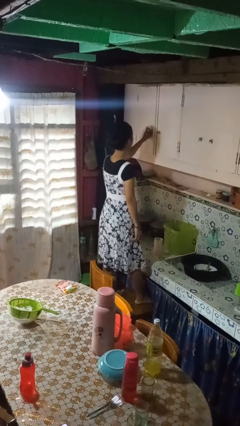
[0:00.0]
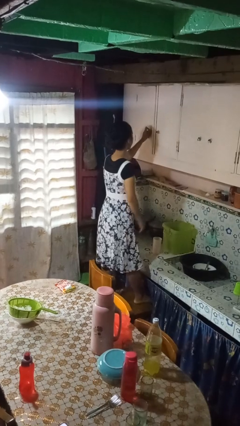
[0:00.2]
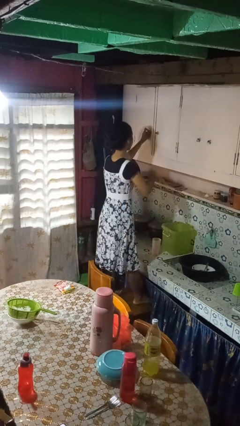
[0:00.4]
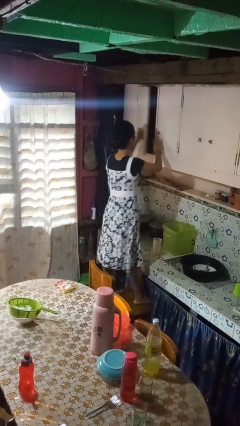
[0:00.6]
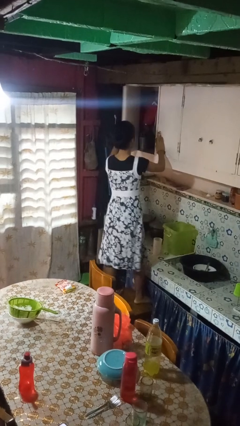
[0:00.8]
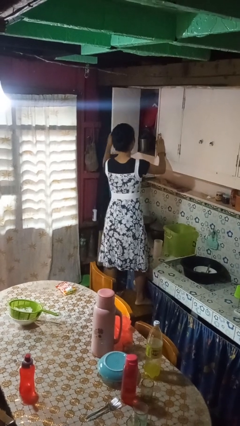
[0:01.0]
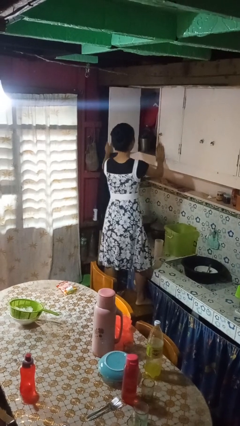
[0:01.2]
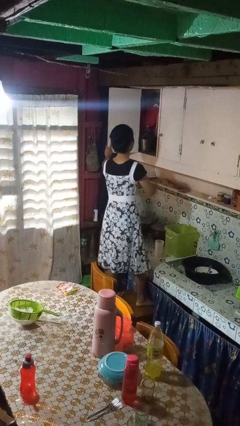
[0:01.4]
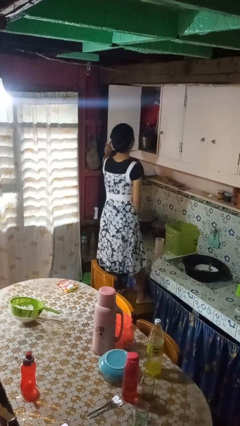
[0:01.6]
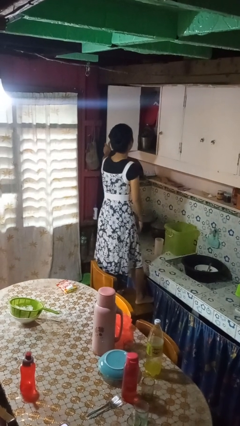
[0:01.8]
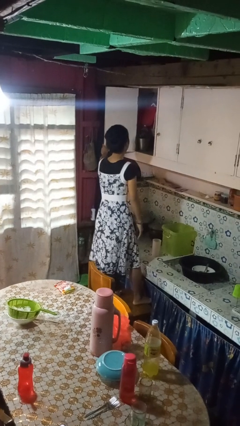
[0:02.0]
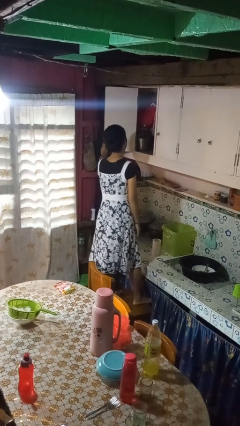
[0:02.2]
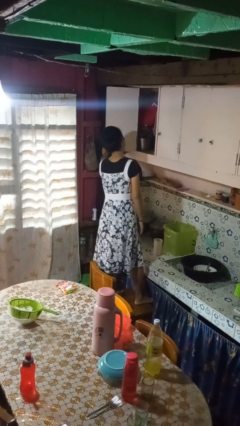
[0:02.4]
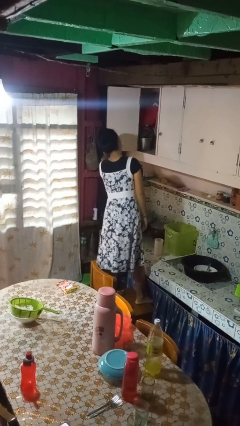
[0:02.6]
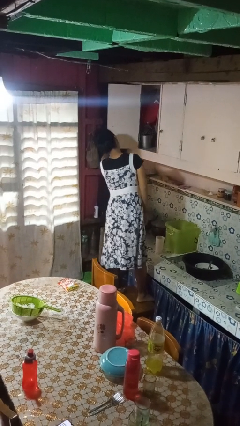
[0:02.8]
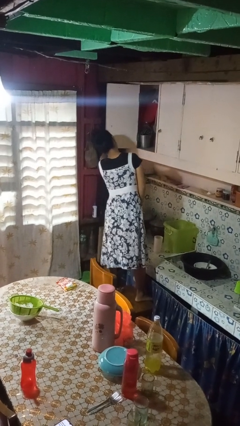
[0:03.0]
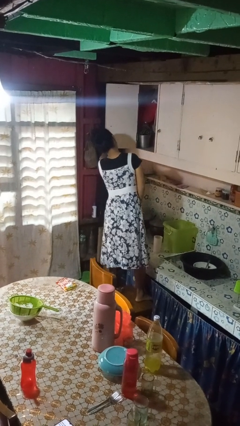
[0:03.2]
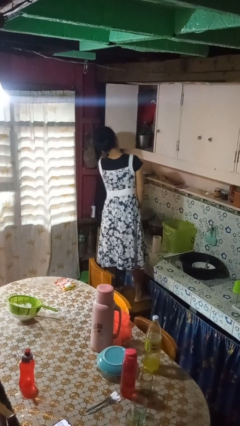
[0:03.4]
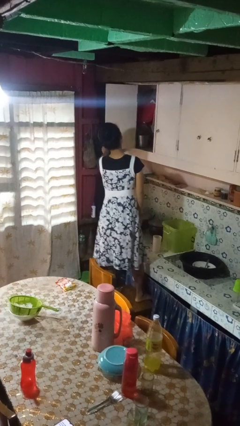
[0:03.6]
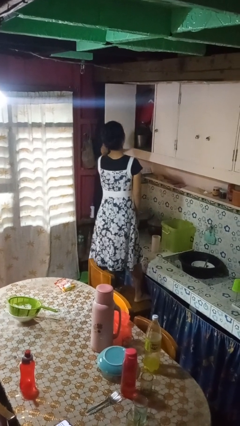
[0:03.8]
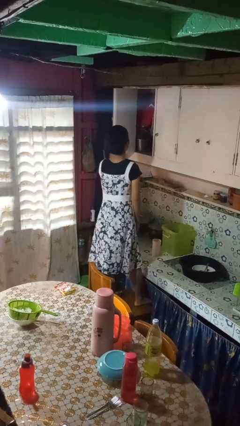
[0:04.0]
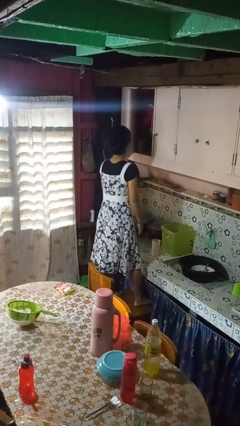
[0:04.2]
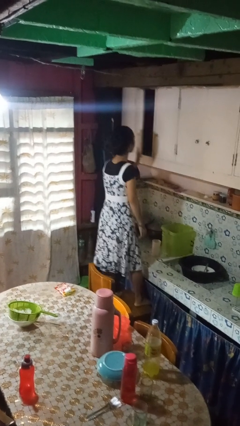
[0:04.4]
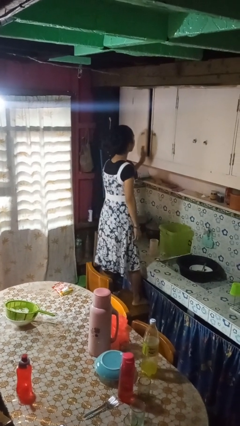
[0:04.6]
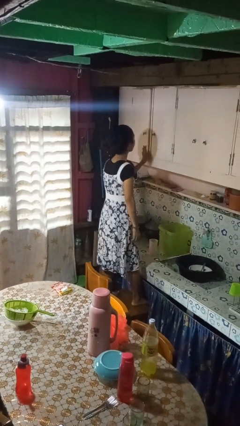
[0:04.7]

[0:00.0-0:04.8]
person opens cabinet

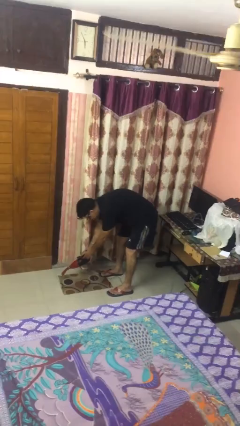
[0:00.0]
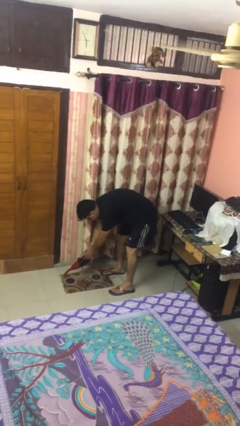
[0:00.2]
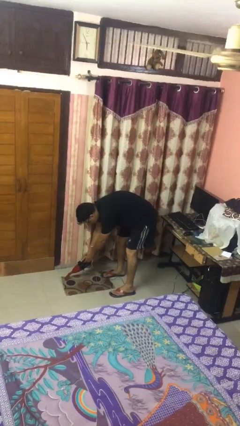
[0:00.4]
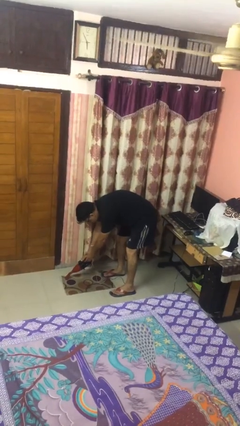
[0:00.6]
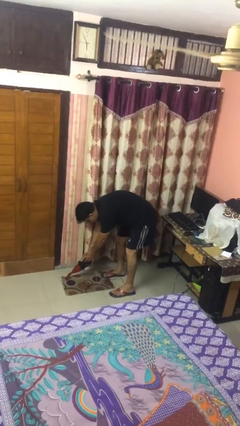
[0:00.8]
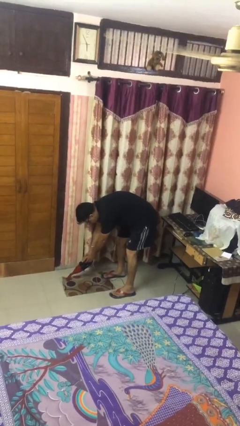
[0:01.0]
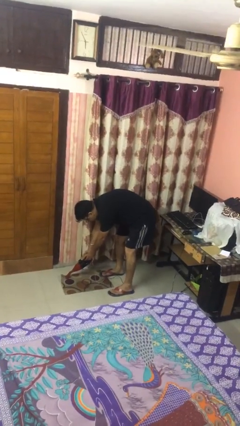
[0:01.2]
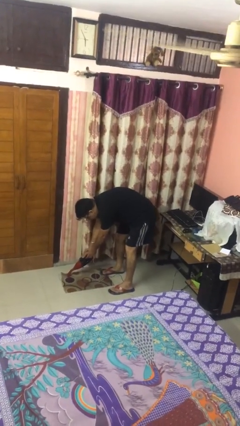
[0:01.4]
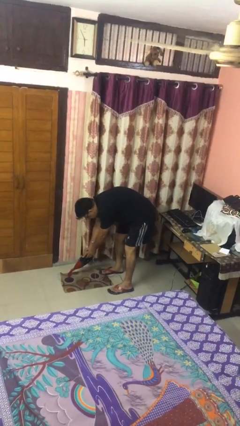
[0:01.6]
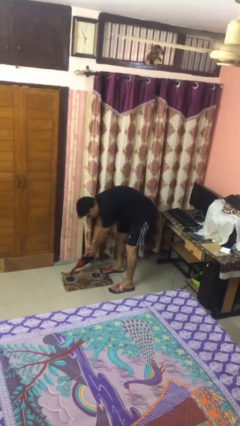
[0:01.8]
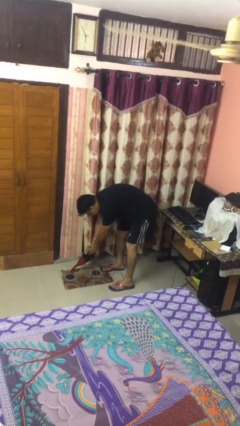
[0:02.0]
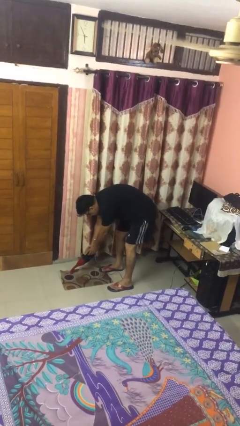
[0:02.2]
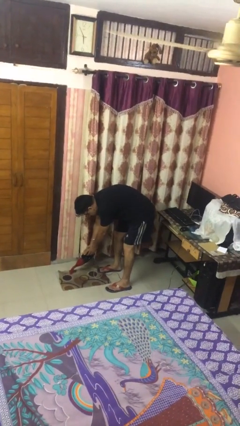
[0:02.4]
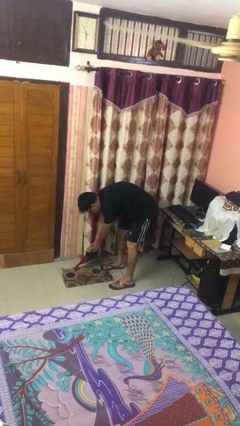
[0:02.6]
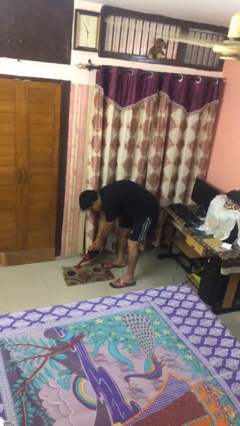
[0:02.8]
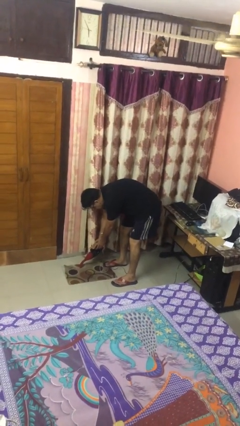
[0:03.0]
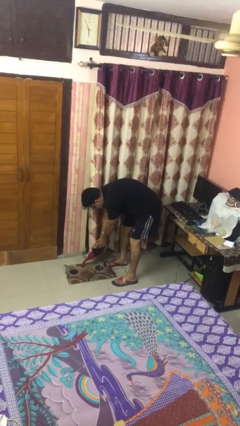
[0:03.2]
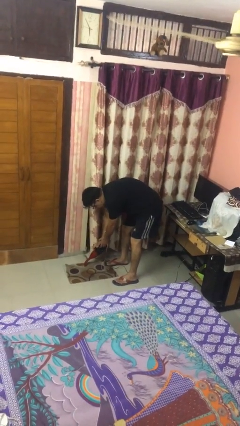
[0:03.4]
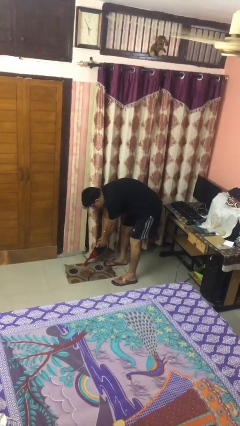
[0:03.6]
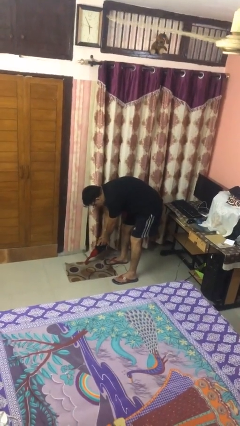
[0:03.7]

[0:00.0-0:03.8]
person vacuums carpet

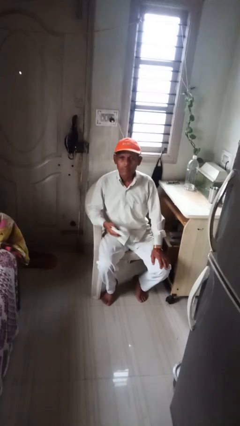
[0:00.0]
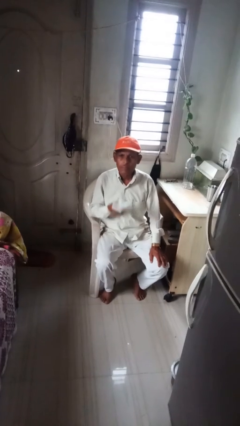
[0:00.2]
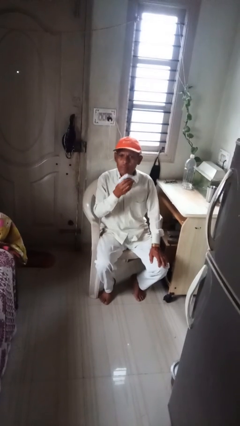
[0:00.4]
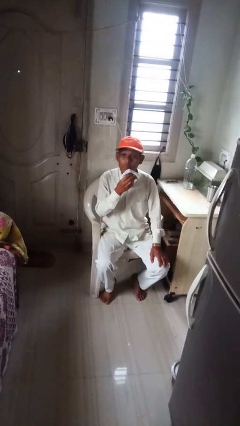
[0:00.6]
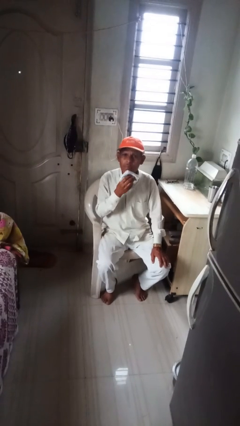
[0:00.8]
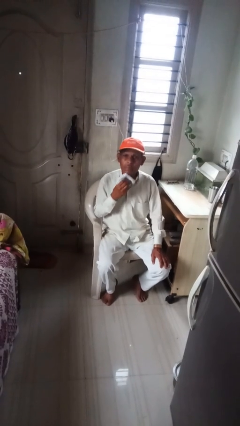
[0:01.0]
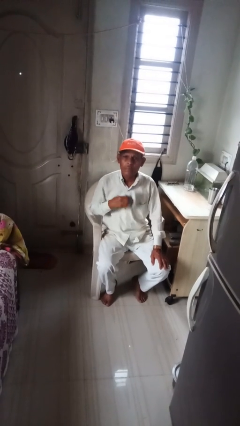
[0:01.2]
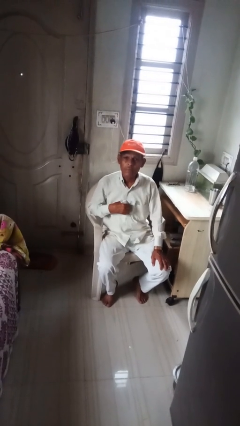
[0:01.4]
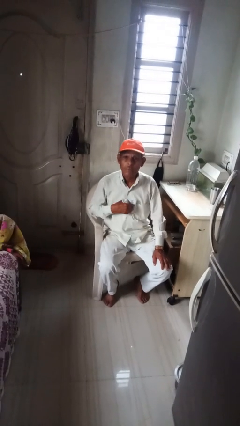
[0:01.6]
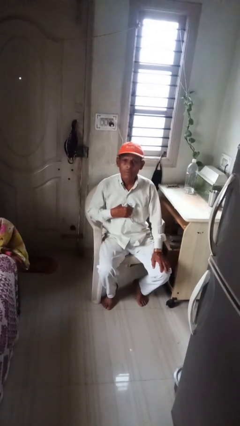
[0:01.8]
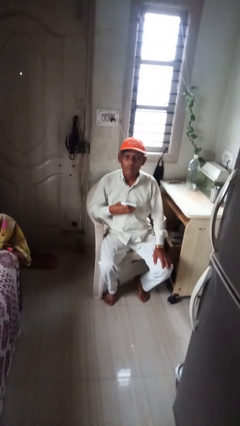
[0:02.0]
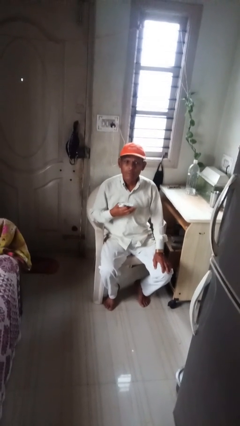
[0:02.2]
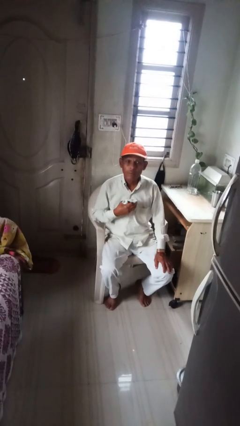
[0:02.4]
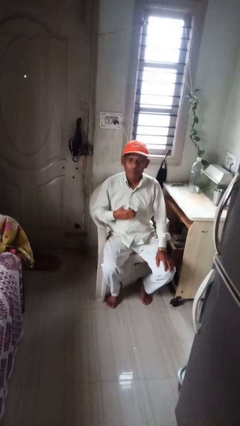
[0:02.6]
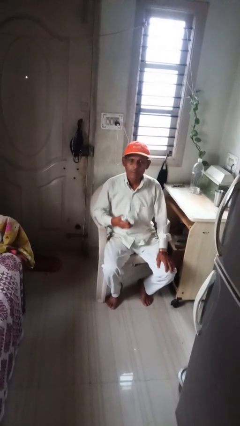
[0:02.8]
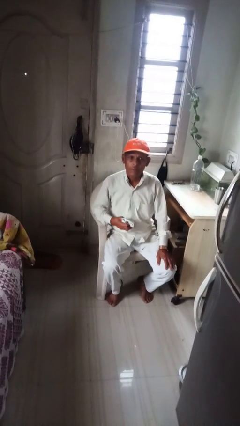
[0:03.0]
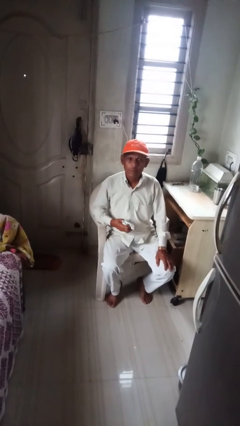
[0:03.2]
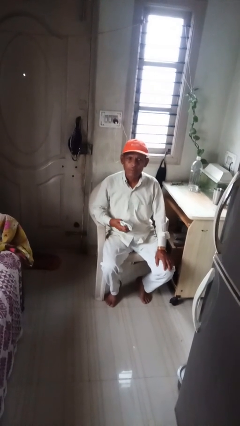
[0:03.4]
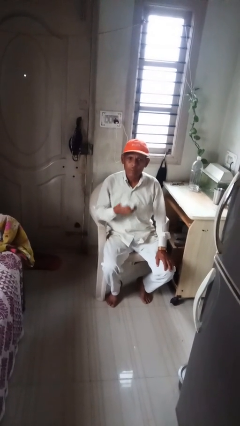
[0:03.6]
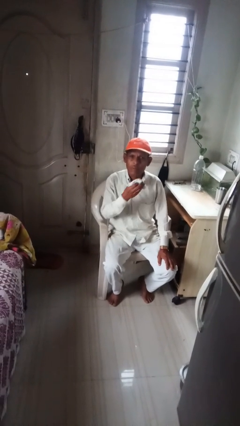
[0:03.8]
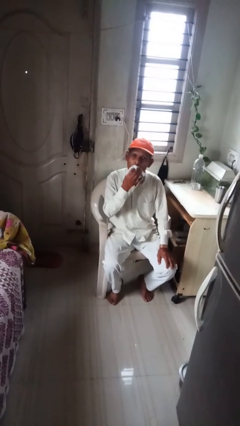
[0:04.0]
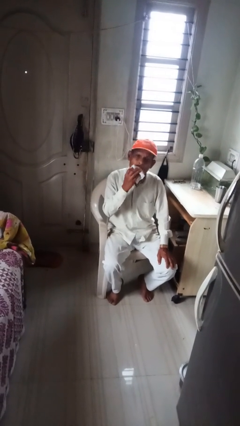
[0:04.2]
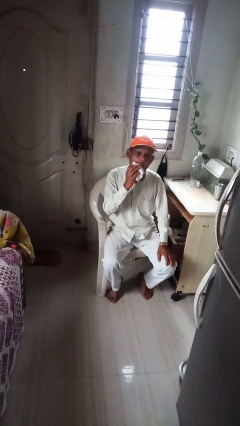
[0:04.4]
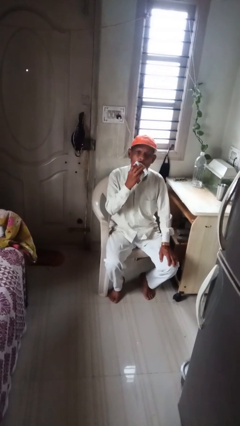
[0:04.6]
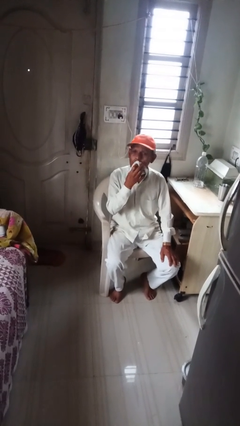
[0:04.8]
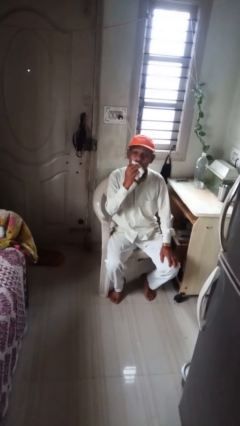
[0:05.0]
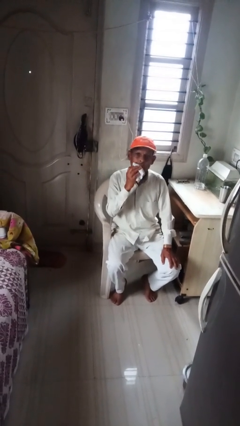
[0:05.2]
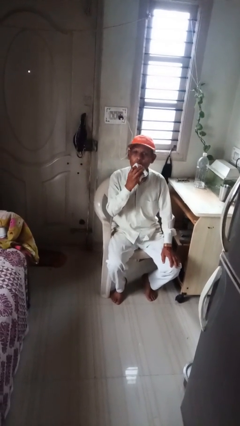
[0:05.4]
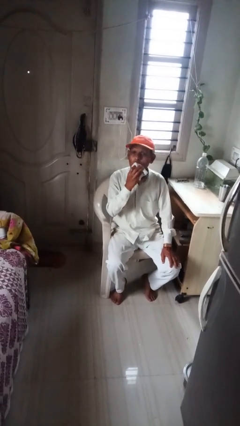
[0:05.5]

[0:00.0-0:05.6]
person wipes mouth with napkin

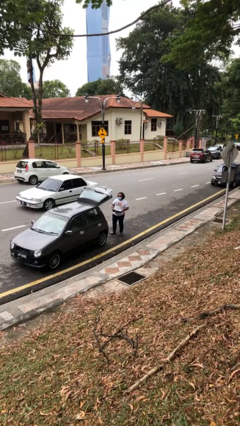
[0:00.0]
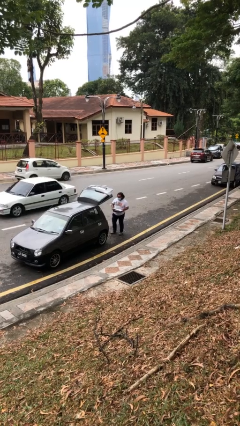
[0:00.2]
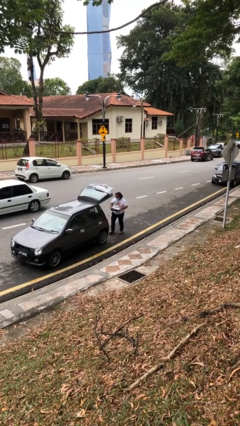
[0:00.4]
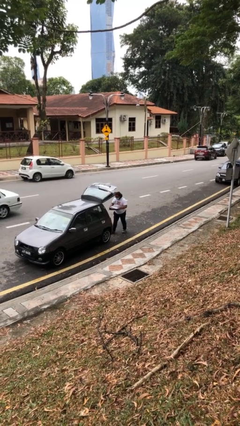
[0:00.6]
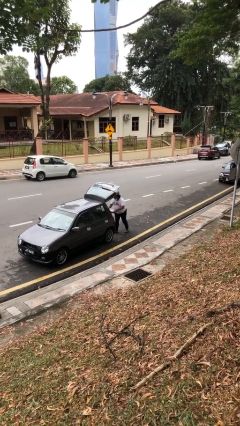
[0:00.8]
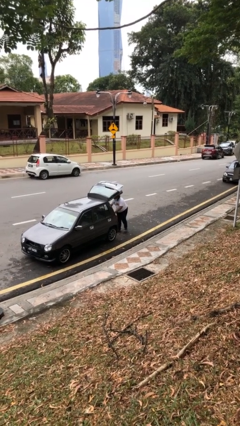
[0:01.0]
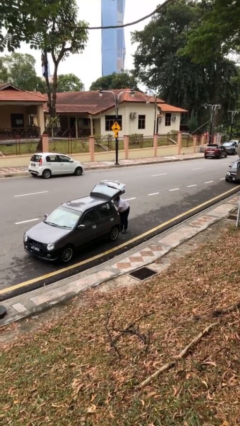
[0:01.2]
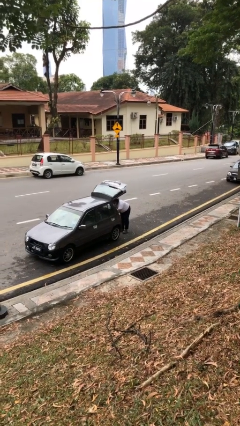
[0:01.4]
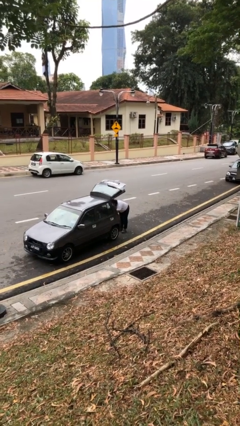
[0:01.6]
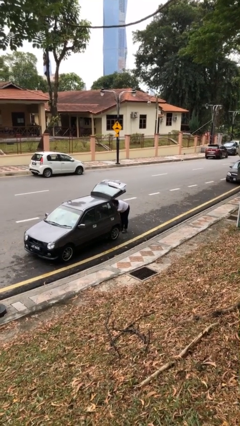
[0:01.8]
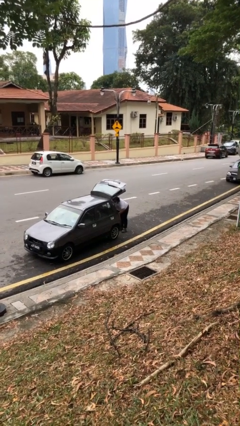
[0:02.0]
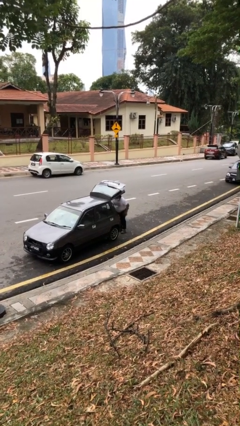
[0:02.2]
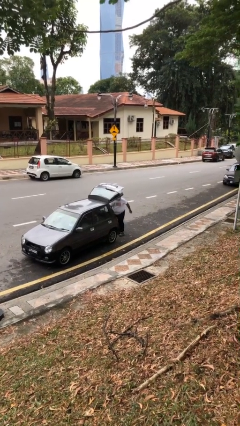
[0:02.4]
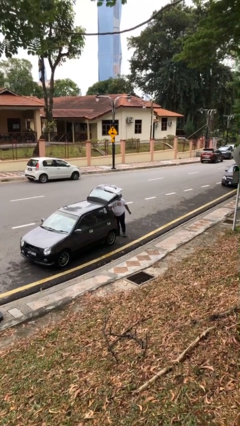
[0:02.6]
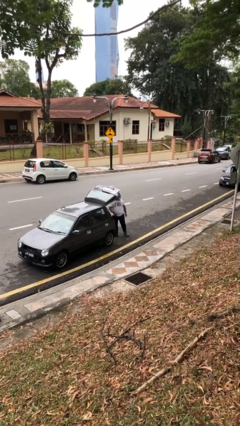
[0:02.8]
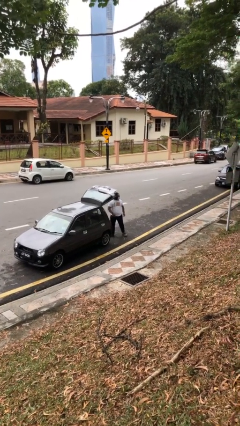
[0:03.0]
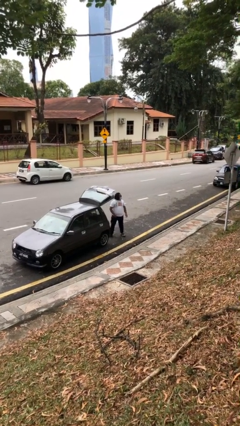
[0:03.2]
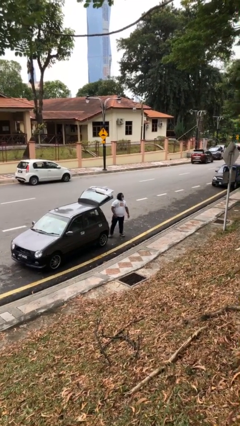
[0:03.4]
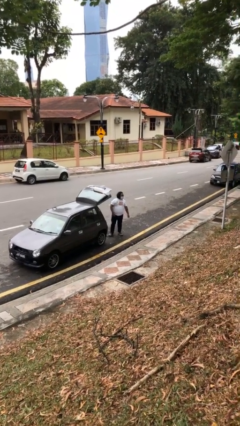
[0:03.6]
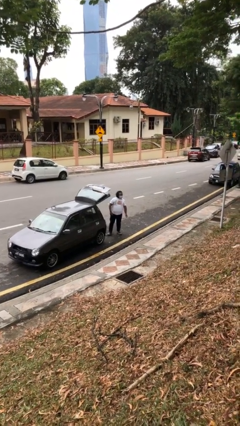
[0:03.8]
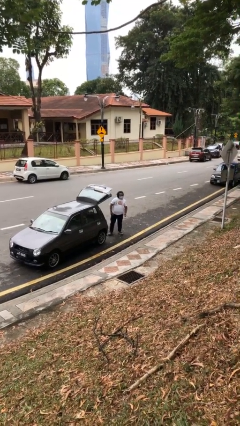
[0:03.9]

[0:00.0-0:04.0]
person loads car
